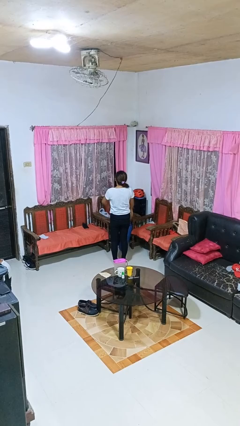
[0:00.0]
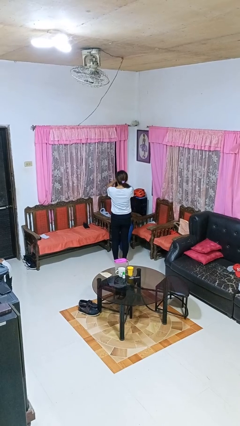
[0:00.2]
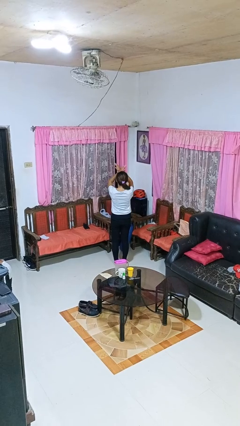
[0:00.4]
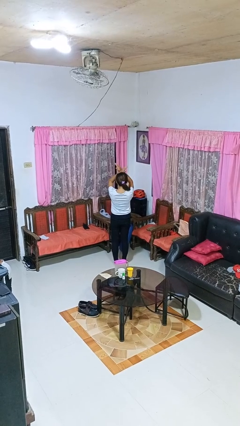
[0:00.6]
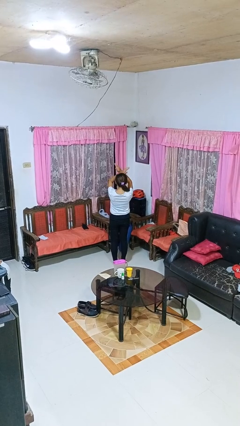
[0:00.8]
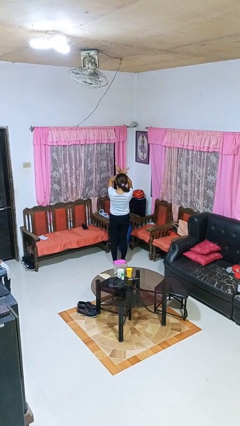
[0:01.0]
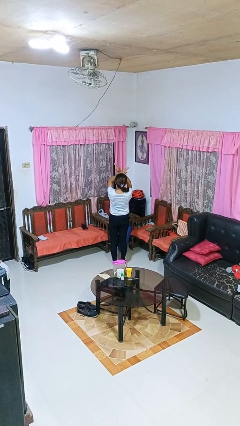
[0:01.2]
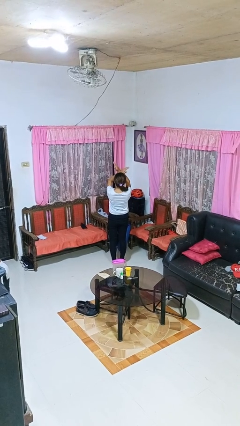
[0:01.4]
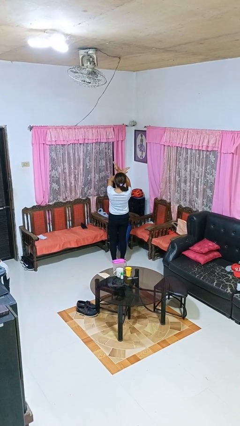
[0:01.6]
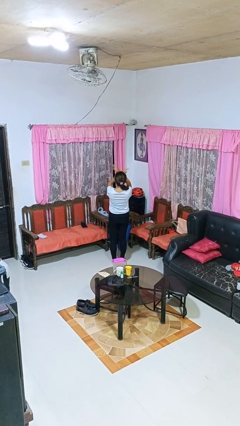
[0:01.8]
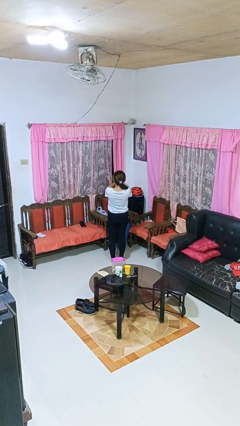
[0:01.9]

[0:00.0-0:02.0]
person gestures arms x

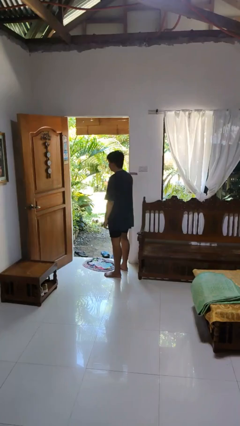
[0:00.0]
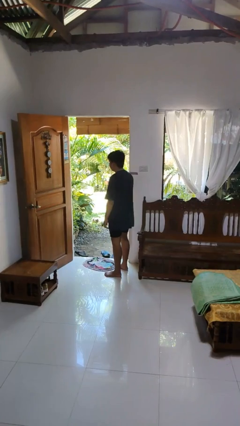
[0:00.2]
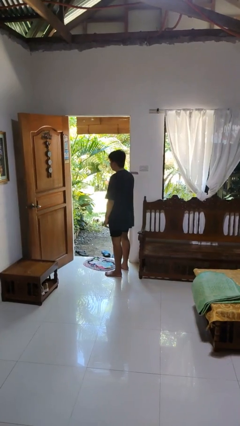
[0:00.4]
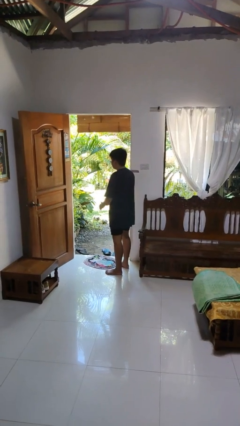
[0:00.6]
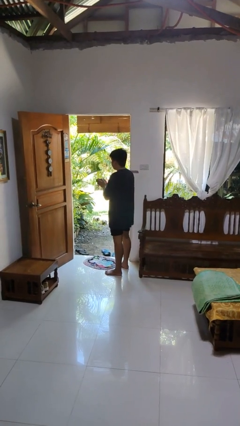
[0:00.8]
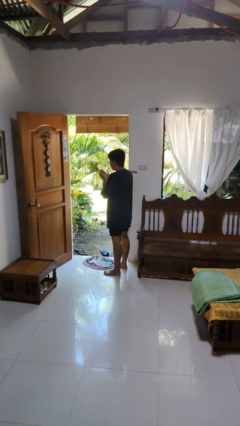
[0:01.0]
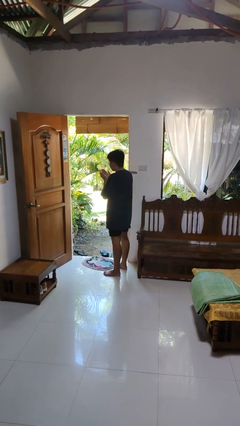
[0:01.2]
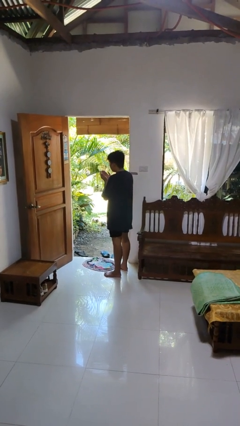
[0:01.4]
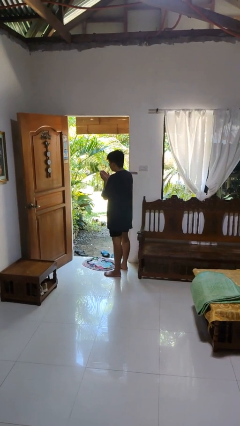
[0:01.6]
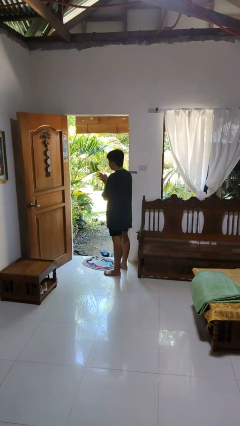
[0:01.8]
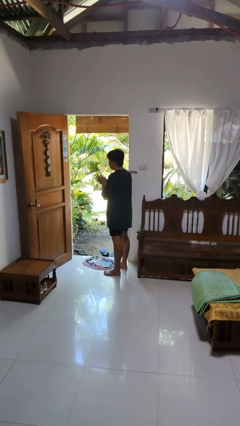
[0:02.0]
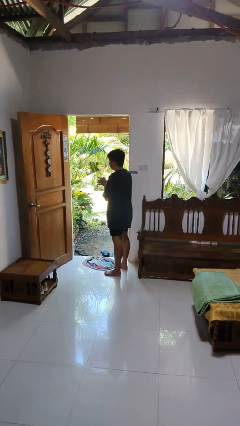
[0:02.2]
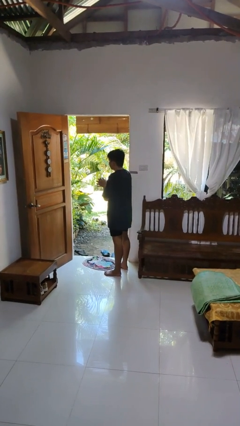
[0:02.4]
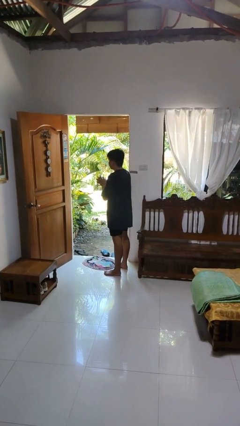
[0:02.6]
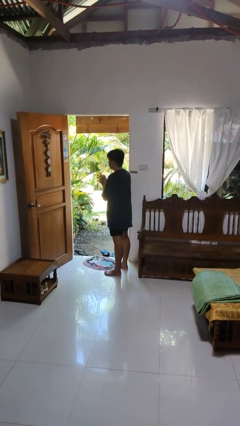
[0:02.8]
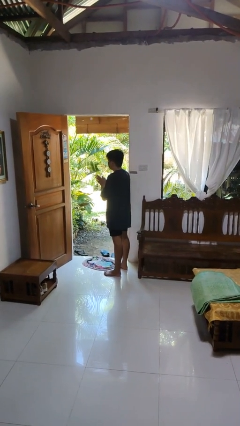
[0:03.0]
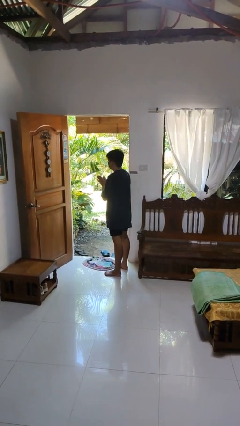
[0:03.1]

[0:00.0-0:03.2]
person blows into hands

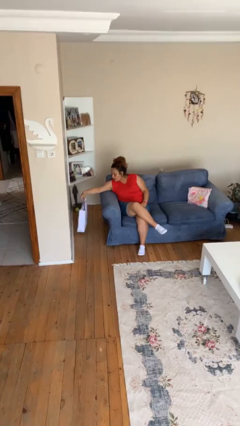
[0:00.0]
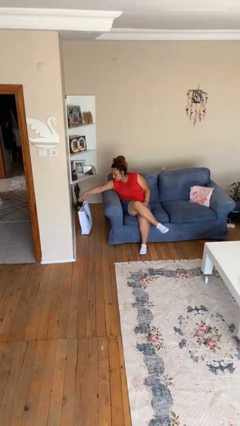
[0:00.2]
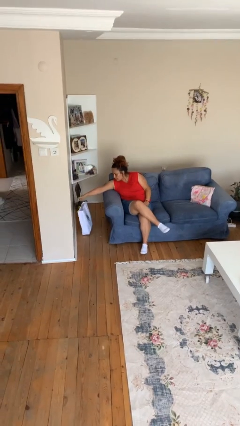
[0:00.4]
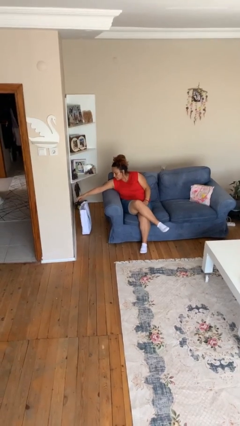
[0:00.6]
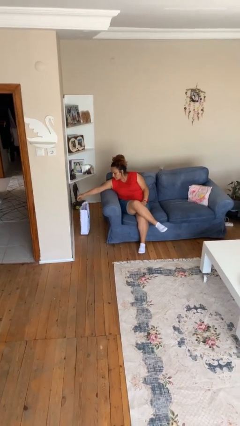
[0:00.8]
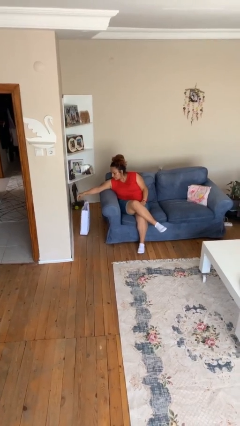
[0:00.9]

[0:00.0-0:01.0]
person puts down object on floor

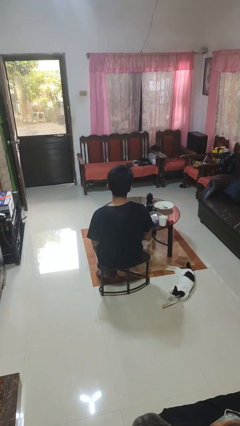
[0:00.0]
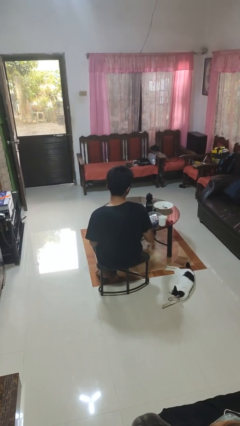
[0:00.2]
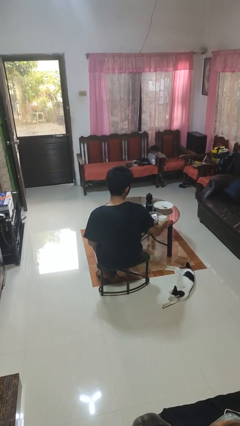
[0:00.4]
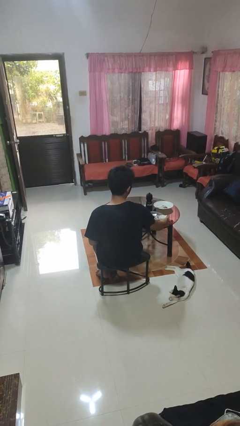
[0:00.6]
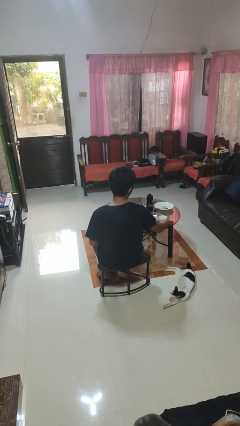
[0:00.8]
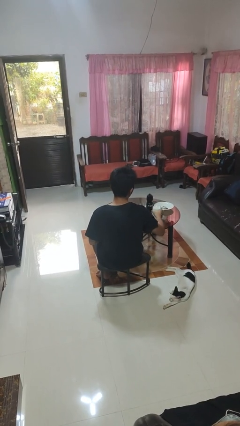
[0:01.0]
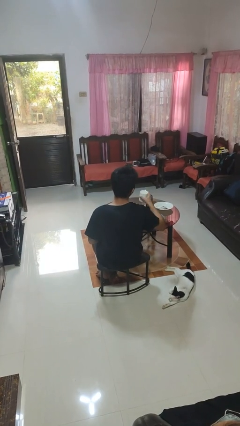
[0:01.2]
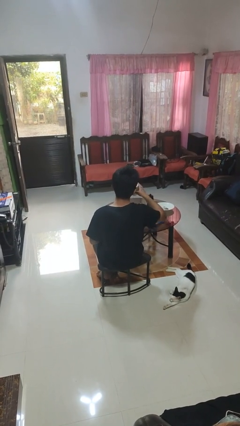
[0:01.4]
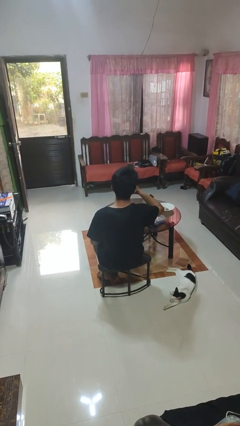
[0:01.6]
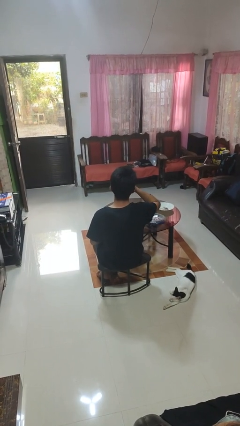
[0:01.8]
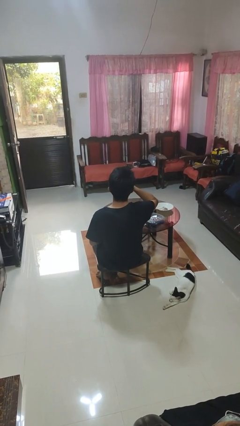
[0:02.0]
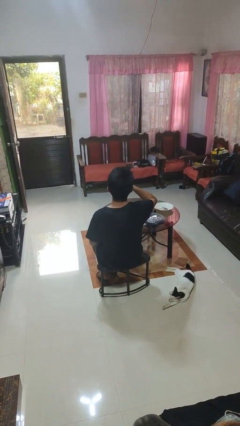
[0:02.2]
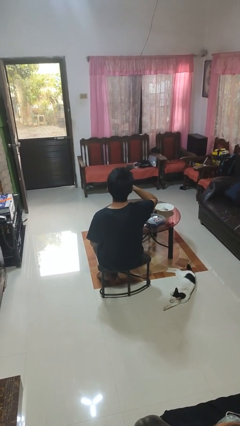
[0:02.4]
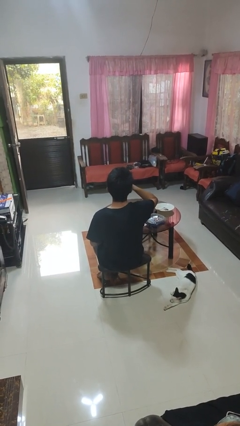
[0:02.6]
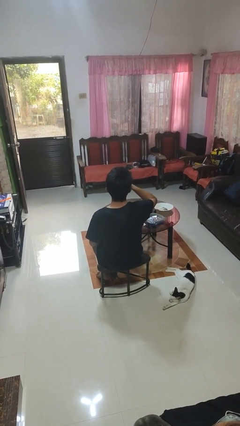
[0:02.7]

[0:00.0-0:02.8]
person drinks from cup

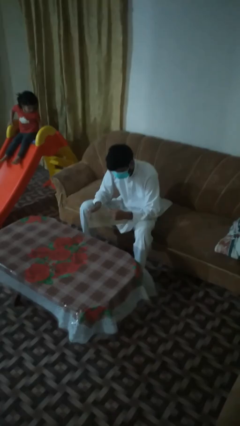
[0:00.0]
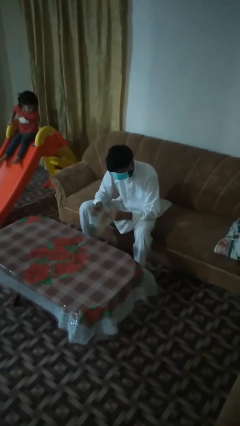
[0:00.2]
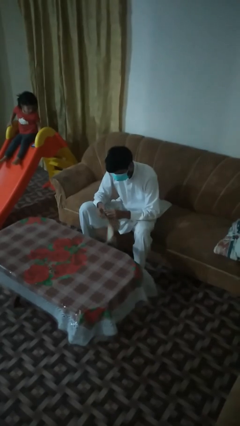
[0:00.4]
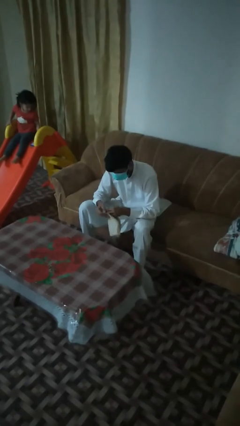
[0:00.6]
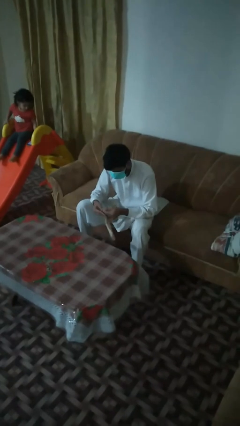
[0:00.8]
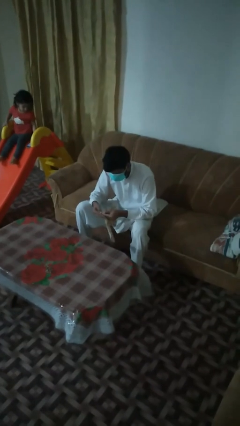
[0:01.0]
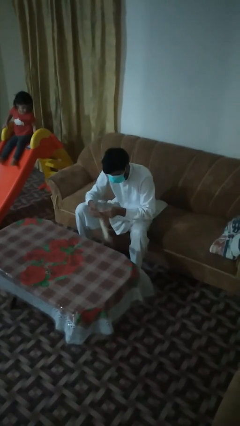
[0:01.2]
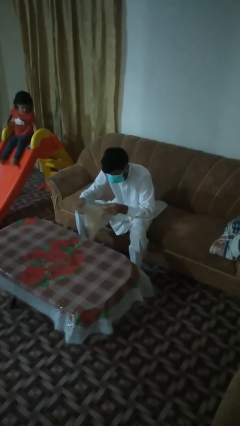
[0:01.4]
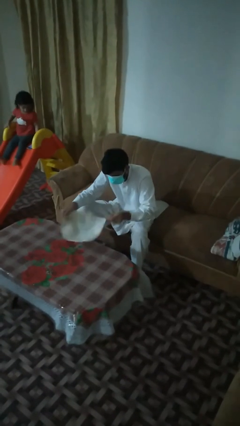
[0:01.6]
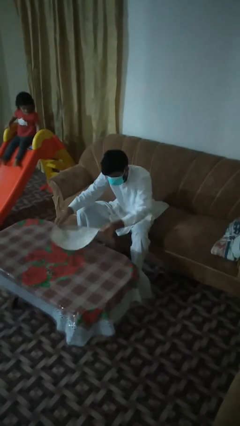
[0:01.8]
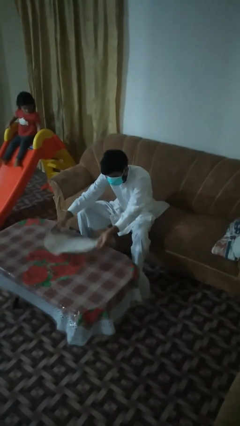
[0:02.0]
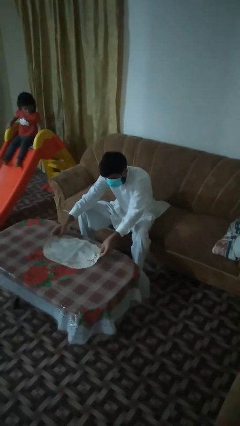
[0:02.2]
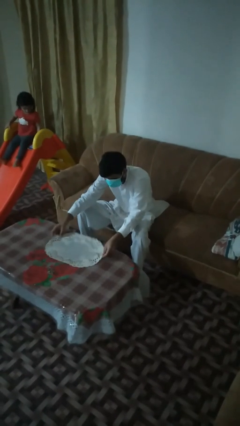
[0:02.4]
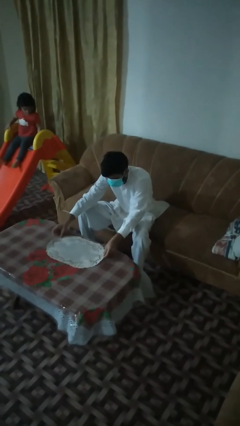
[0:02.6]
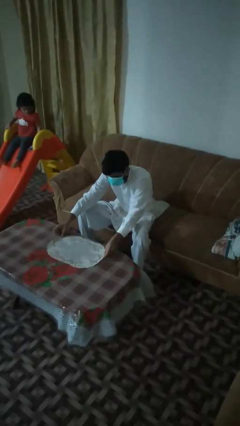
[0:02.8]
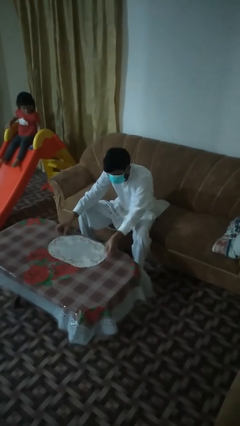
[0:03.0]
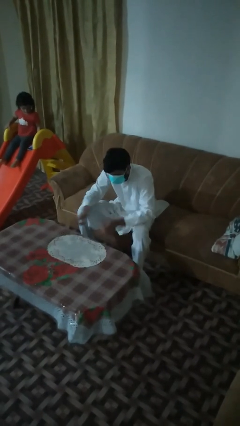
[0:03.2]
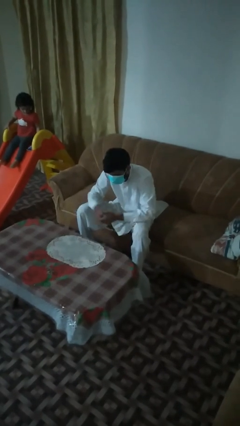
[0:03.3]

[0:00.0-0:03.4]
person spreads tablecloth

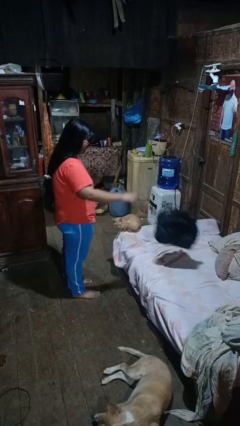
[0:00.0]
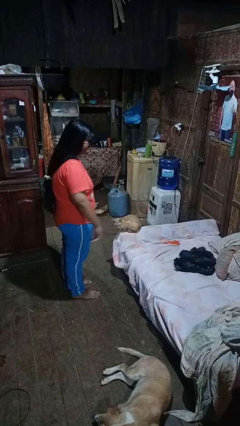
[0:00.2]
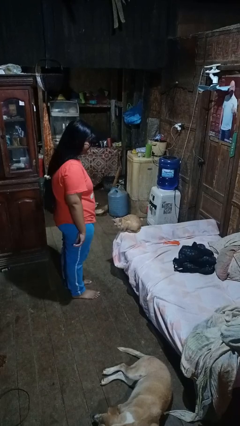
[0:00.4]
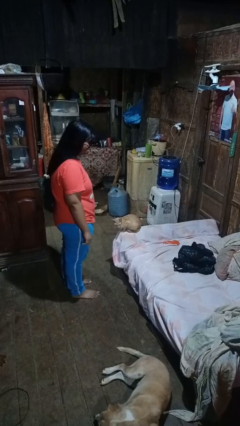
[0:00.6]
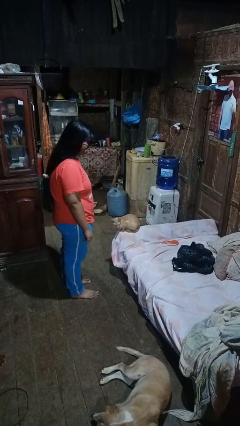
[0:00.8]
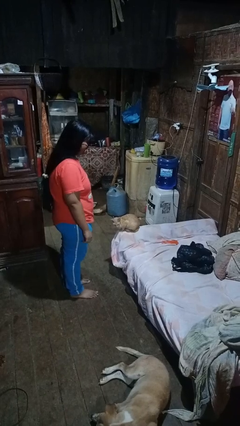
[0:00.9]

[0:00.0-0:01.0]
person throws object on bed

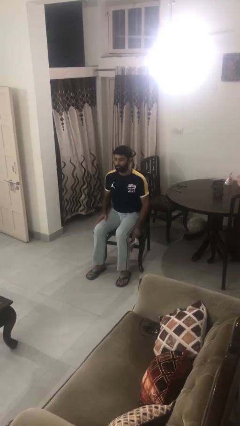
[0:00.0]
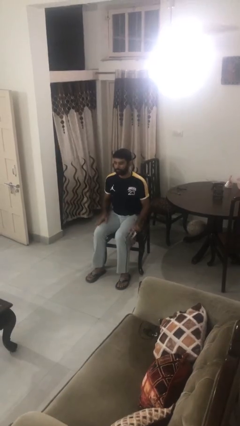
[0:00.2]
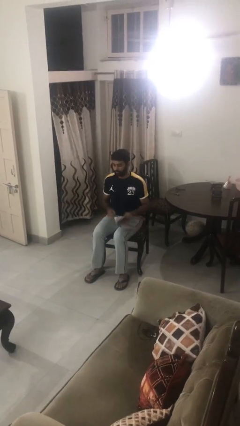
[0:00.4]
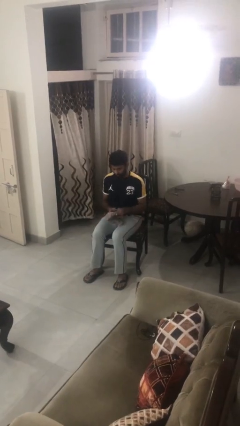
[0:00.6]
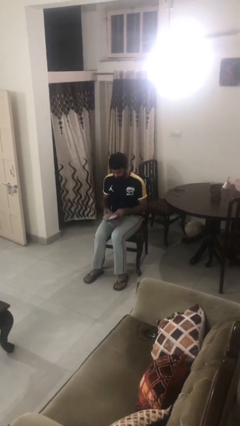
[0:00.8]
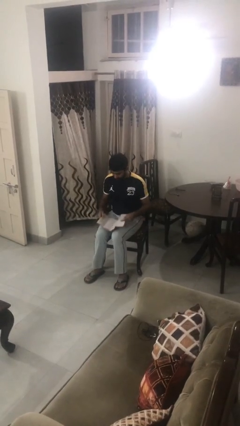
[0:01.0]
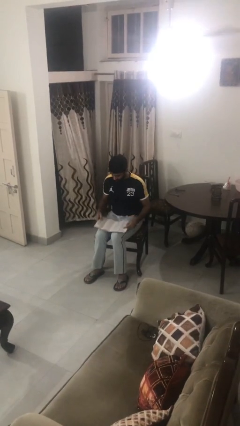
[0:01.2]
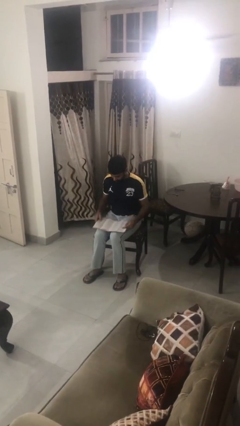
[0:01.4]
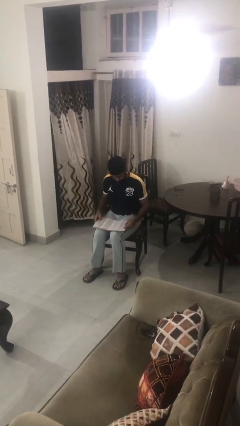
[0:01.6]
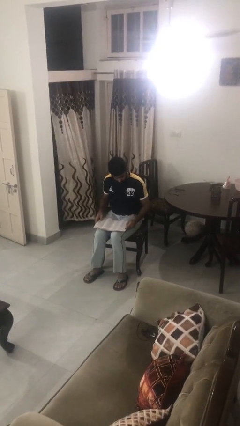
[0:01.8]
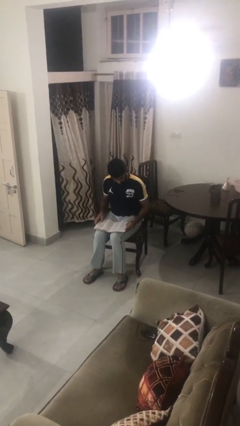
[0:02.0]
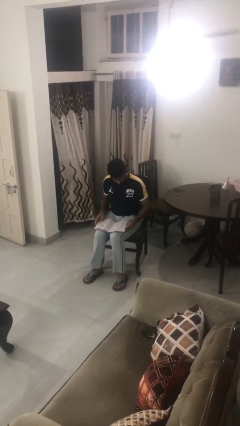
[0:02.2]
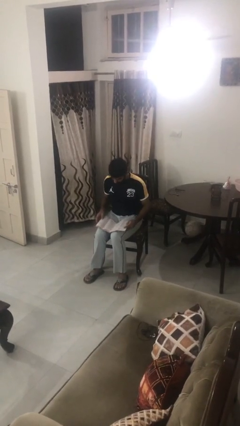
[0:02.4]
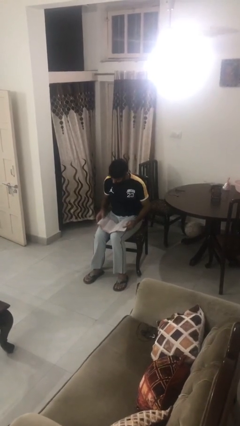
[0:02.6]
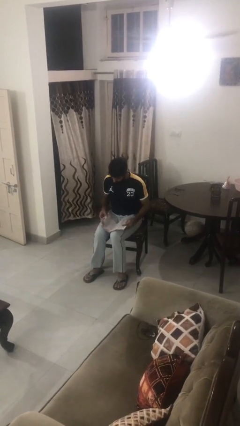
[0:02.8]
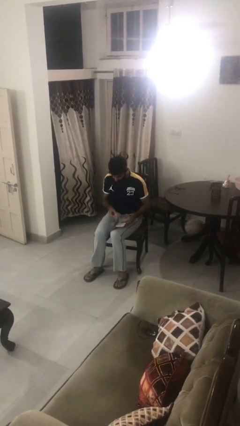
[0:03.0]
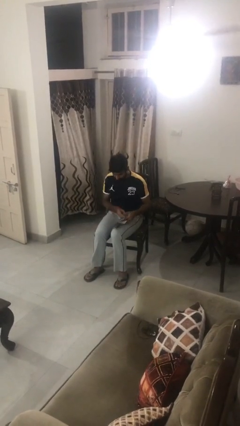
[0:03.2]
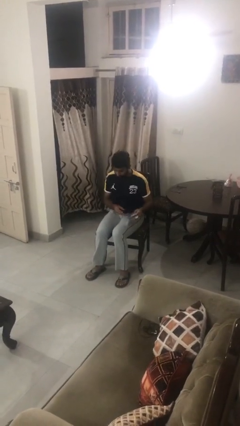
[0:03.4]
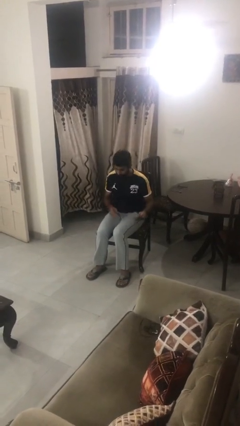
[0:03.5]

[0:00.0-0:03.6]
person reads magazine
